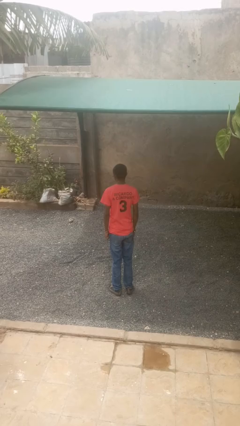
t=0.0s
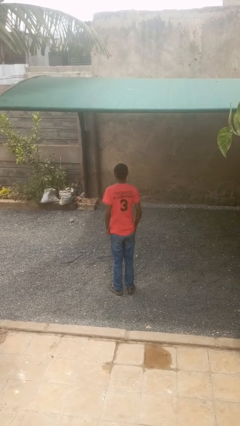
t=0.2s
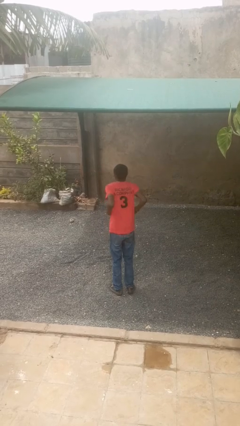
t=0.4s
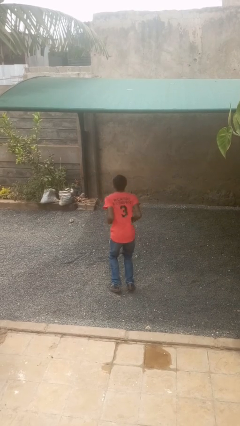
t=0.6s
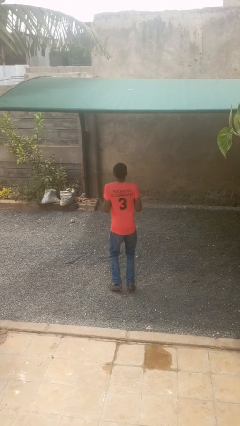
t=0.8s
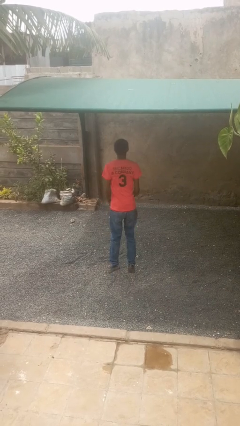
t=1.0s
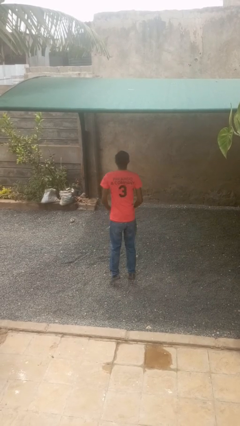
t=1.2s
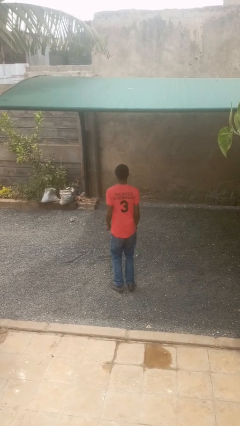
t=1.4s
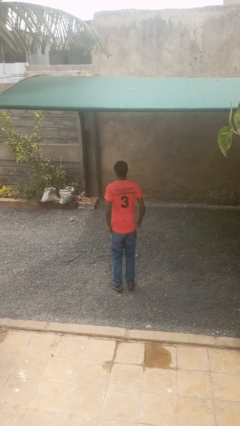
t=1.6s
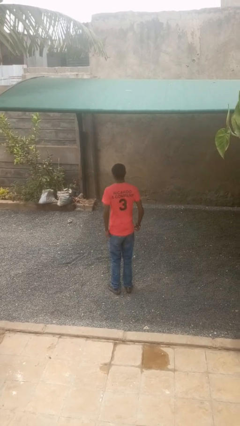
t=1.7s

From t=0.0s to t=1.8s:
person jumps

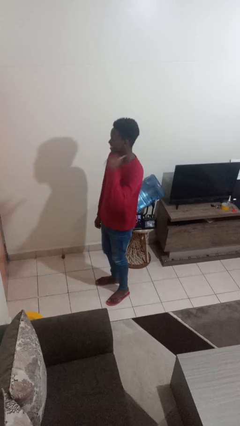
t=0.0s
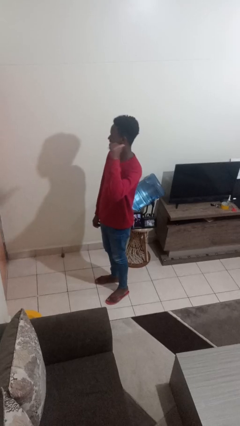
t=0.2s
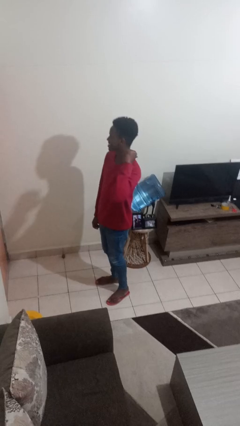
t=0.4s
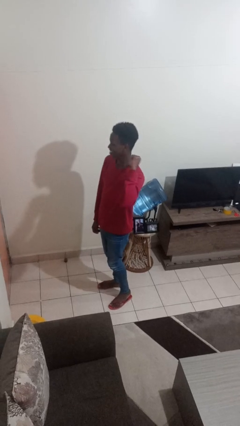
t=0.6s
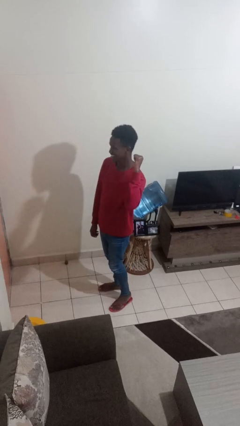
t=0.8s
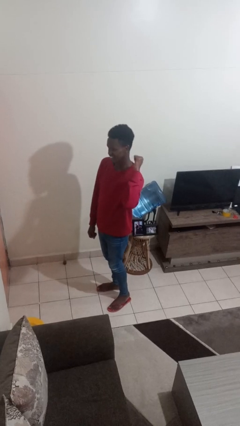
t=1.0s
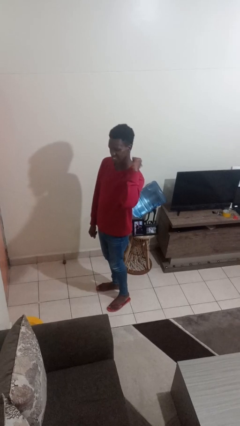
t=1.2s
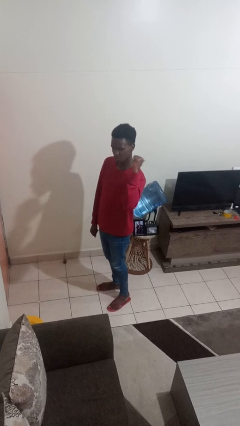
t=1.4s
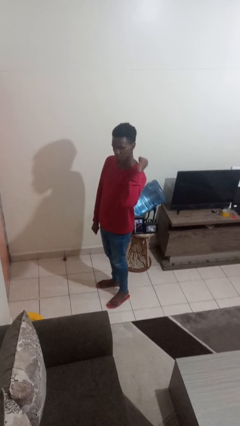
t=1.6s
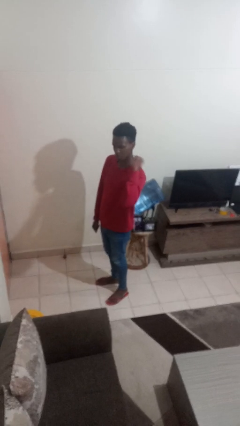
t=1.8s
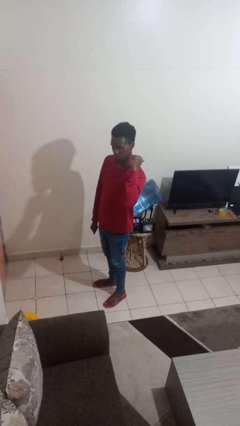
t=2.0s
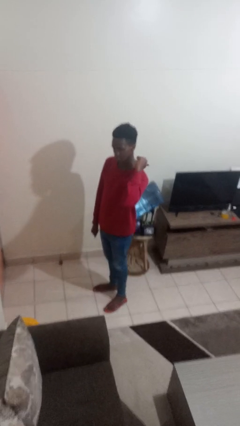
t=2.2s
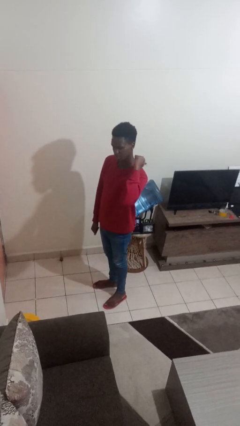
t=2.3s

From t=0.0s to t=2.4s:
person gestures behind me

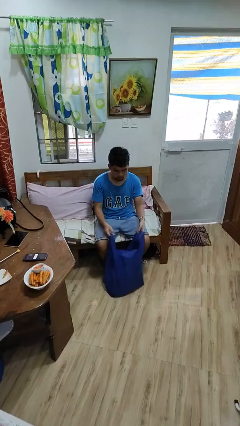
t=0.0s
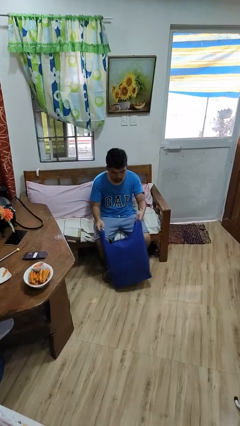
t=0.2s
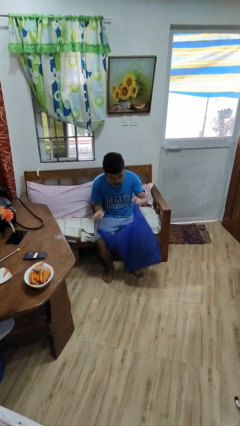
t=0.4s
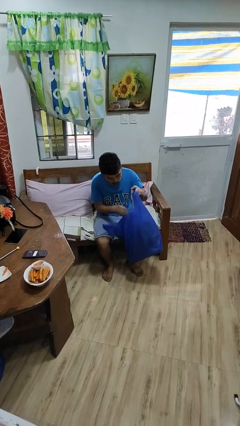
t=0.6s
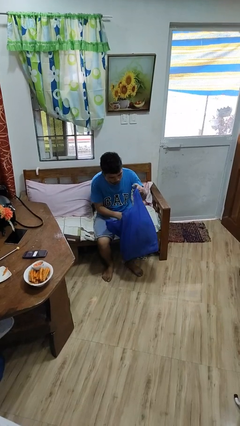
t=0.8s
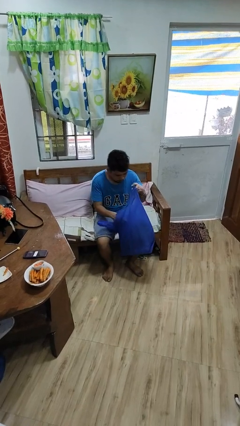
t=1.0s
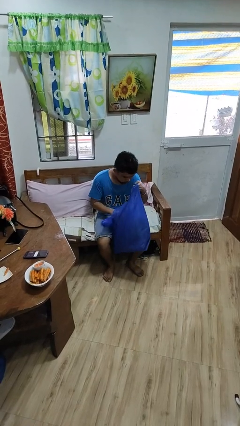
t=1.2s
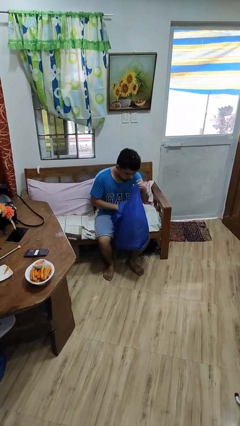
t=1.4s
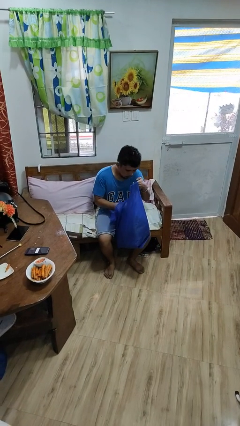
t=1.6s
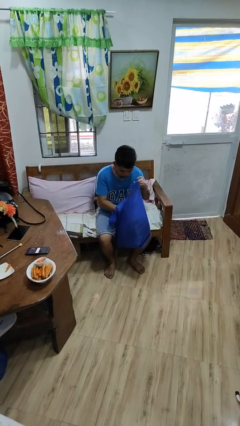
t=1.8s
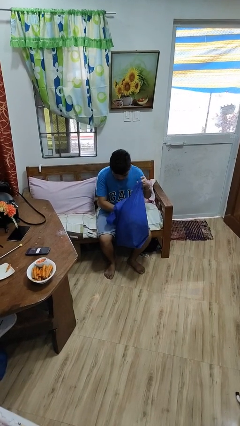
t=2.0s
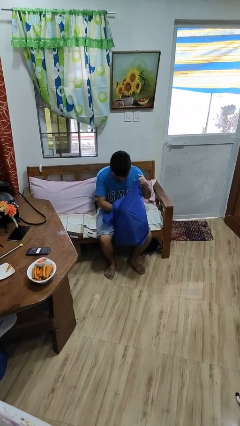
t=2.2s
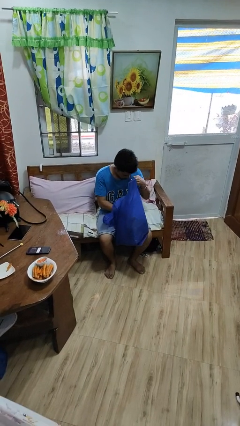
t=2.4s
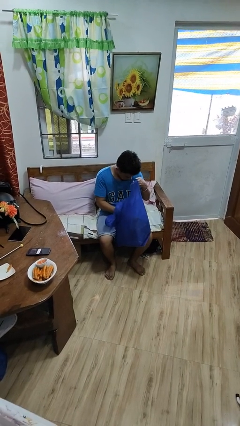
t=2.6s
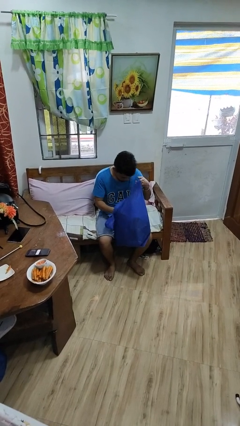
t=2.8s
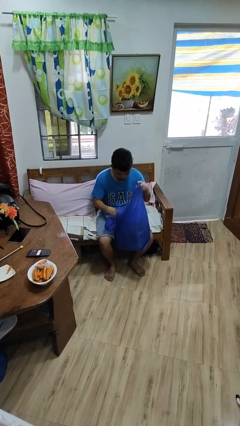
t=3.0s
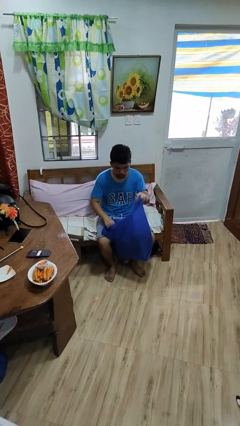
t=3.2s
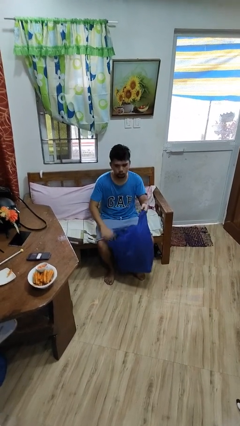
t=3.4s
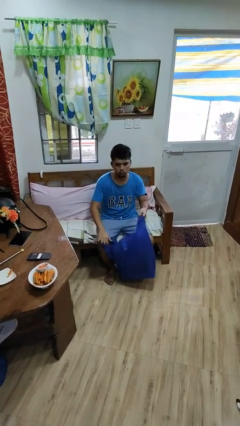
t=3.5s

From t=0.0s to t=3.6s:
person searches in bag

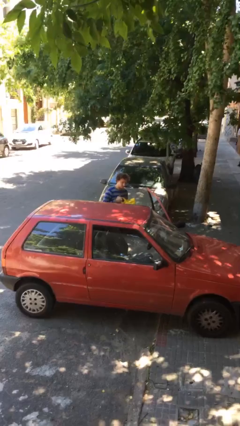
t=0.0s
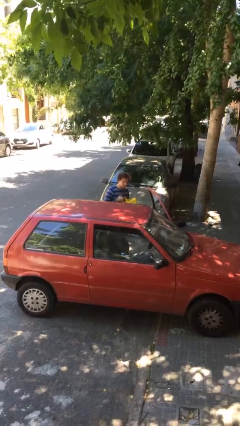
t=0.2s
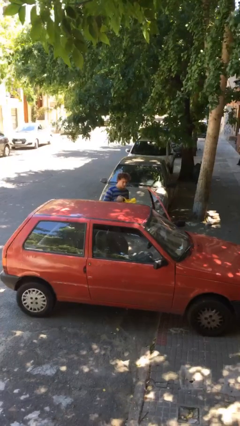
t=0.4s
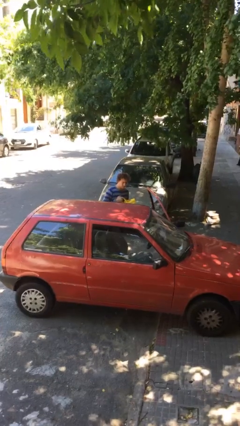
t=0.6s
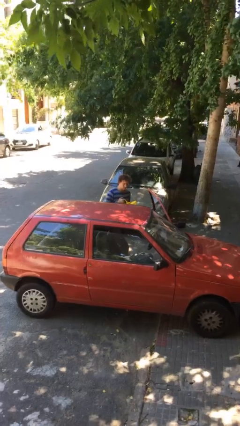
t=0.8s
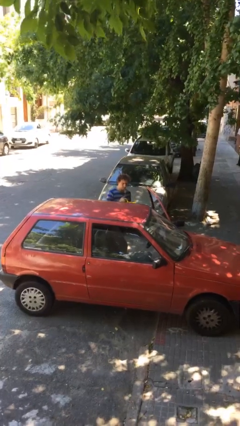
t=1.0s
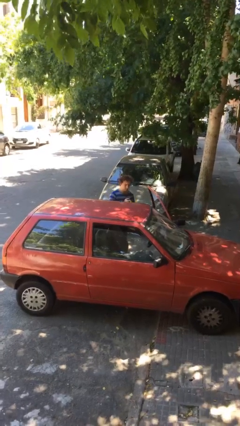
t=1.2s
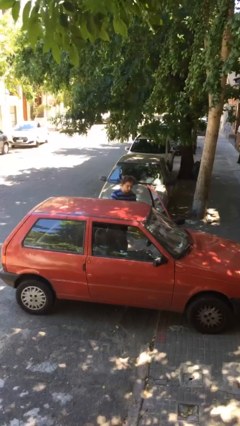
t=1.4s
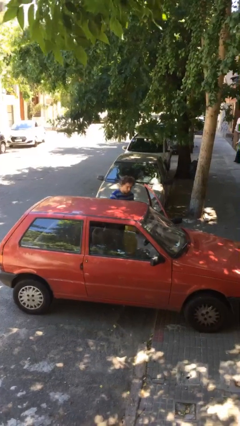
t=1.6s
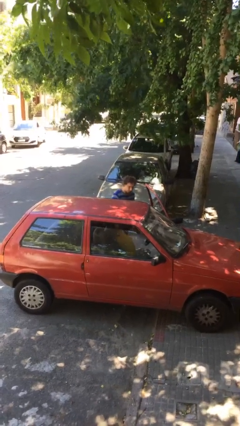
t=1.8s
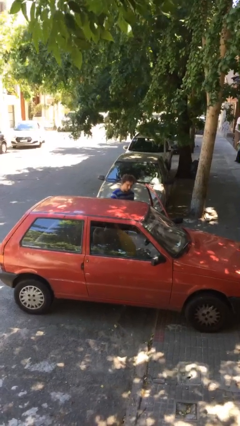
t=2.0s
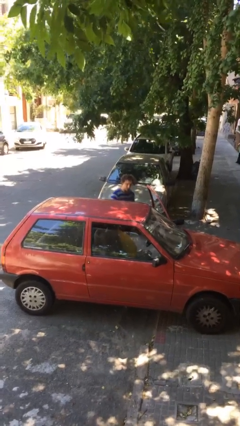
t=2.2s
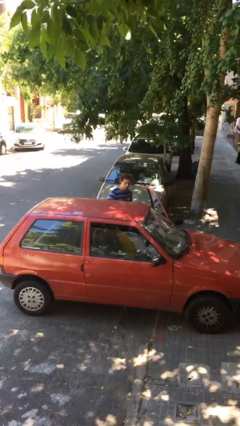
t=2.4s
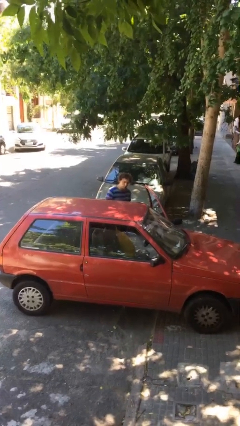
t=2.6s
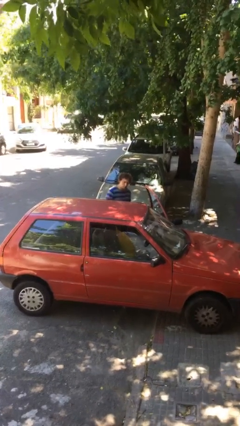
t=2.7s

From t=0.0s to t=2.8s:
person loads car

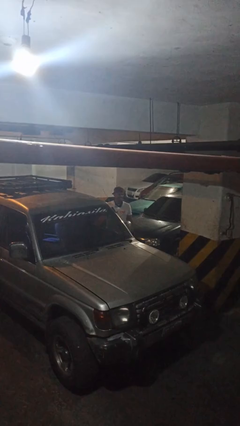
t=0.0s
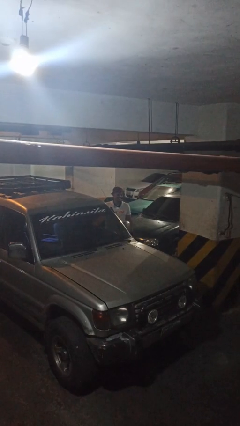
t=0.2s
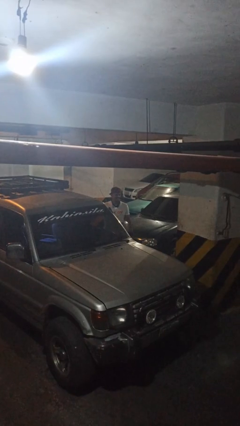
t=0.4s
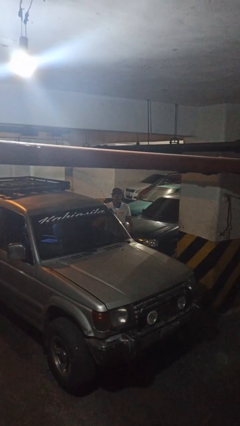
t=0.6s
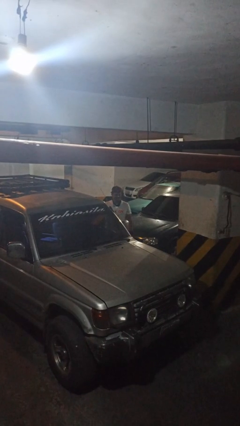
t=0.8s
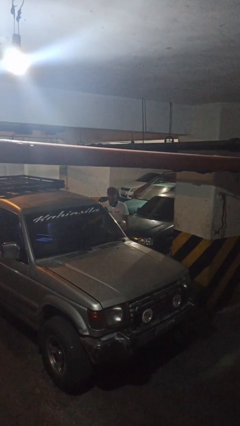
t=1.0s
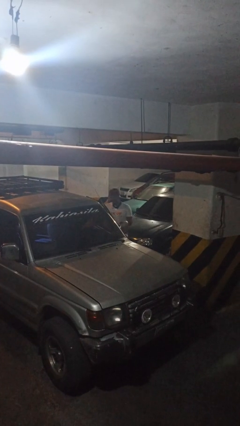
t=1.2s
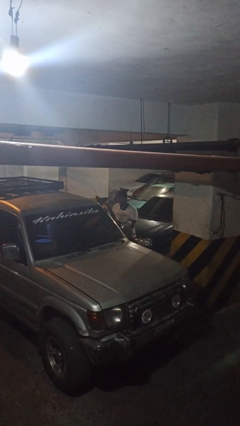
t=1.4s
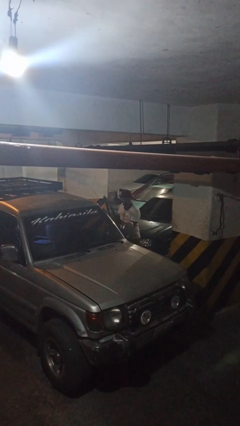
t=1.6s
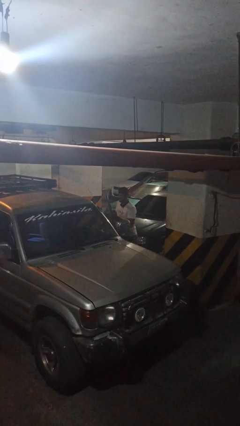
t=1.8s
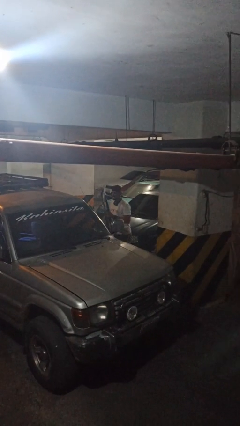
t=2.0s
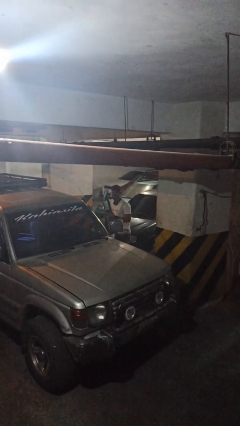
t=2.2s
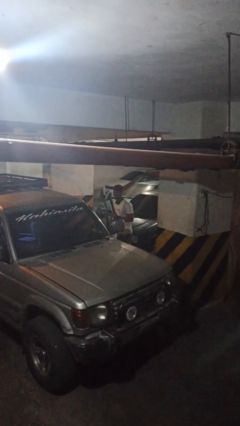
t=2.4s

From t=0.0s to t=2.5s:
person opens car door

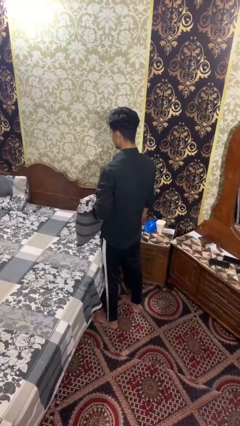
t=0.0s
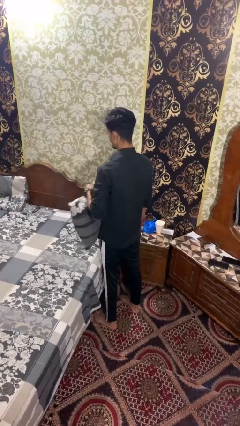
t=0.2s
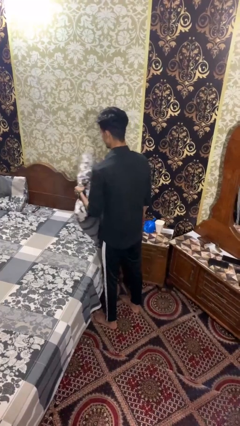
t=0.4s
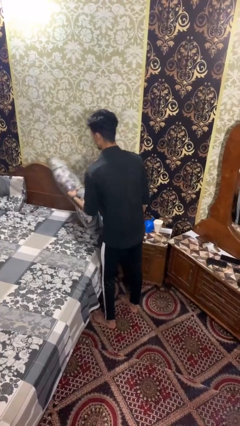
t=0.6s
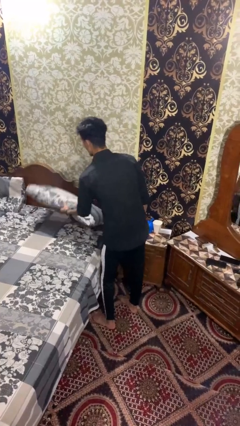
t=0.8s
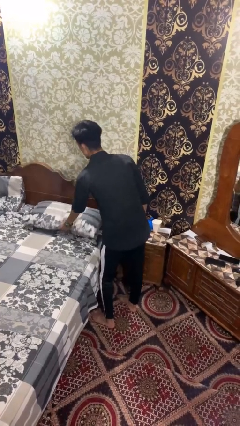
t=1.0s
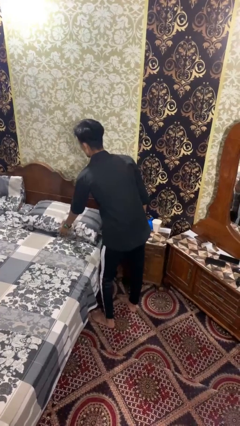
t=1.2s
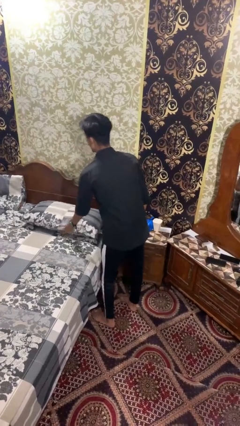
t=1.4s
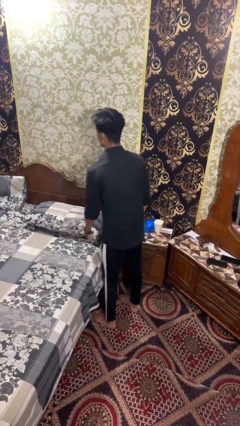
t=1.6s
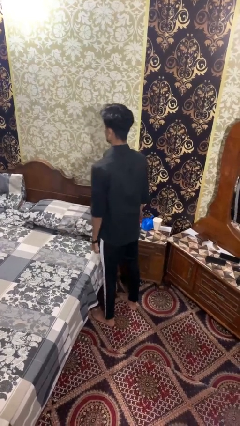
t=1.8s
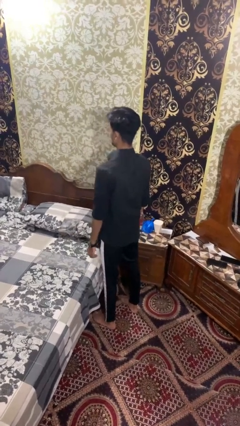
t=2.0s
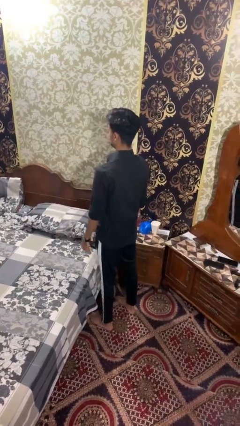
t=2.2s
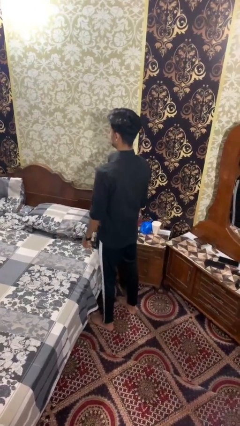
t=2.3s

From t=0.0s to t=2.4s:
person puts down object on bed

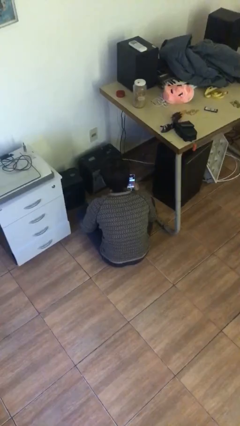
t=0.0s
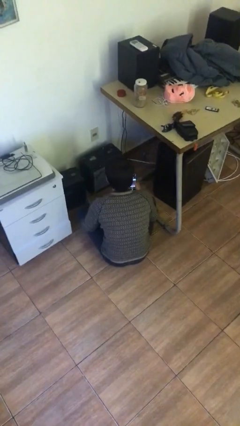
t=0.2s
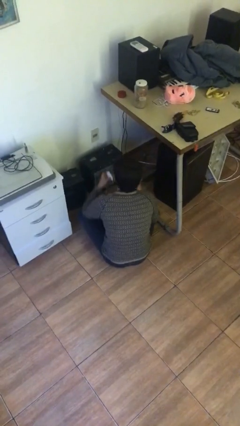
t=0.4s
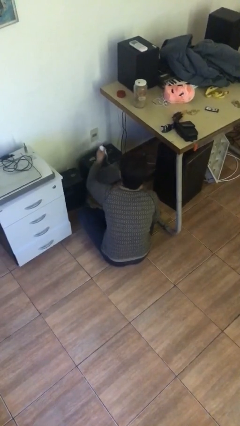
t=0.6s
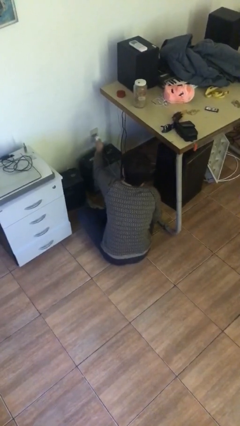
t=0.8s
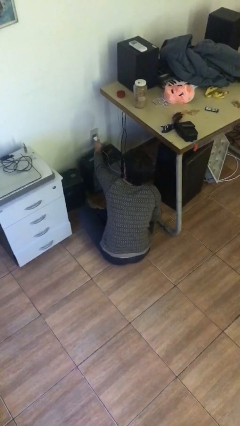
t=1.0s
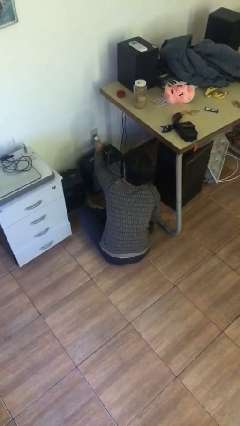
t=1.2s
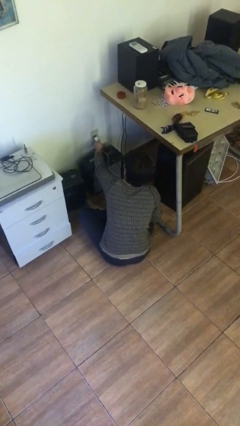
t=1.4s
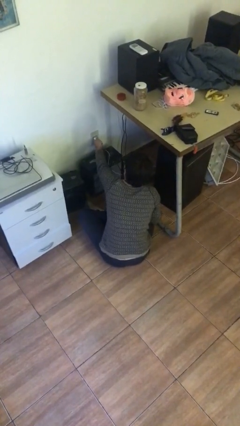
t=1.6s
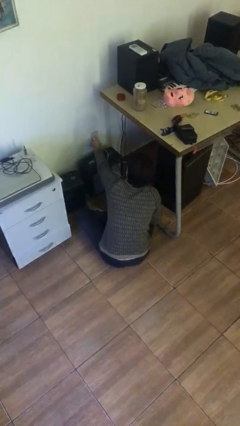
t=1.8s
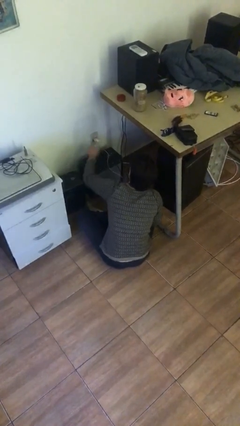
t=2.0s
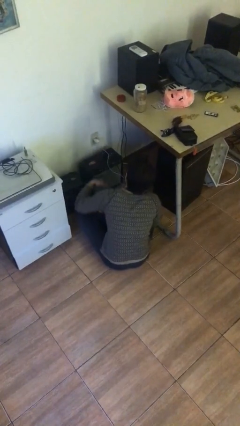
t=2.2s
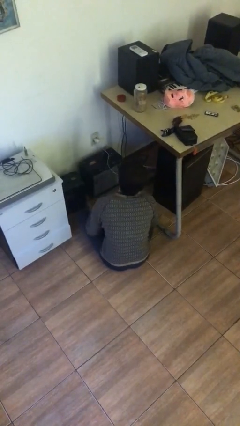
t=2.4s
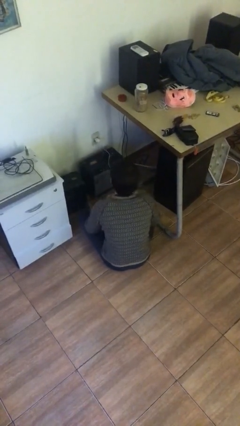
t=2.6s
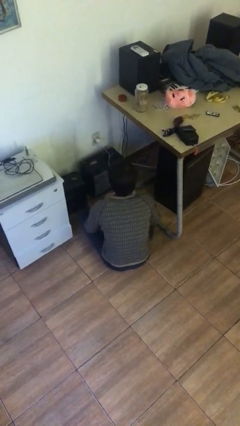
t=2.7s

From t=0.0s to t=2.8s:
person plugs into electrical socket
